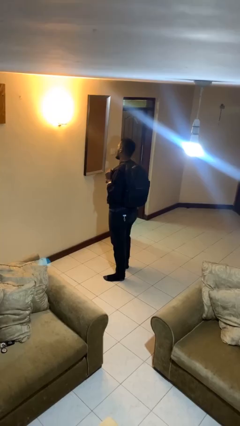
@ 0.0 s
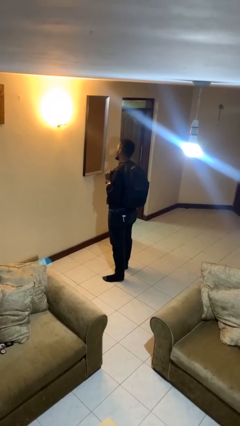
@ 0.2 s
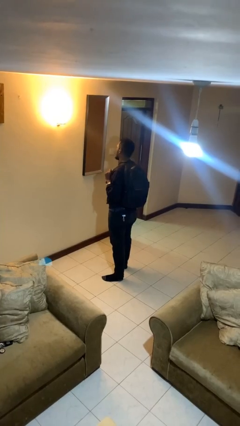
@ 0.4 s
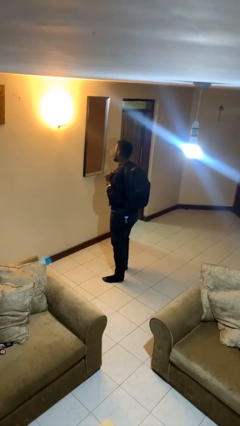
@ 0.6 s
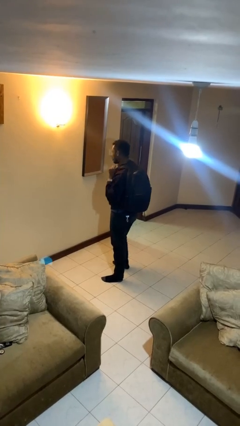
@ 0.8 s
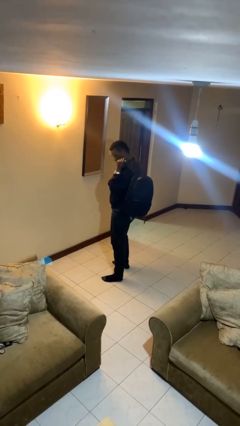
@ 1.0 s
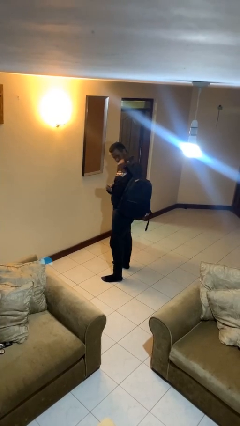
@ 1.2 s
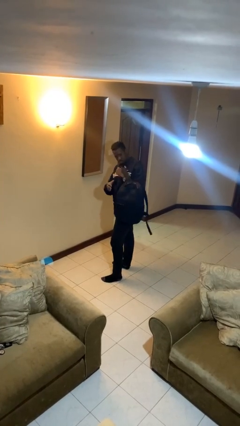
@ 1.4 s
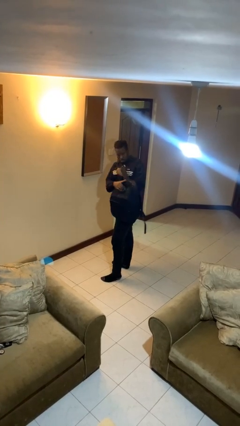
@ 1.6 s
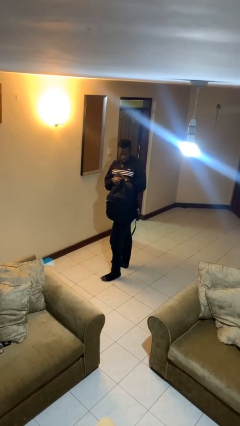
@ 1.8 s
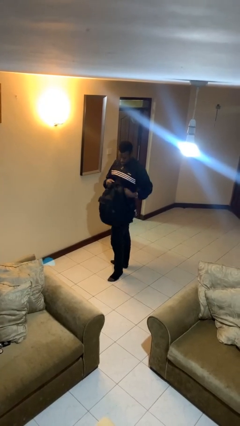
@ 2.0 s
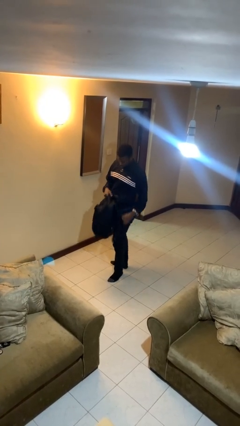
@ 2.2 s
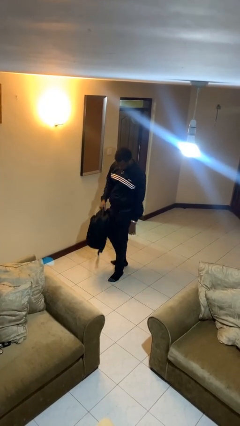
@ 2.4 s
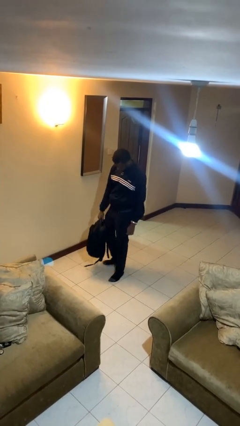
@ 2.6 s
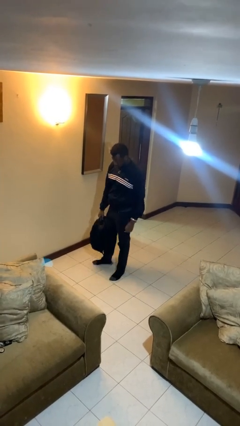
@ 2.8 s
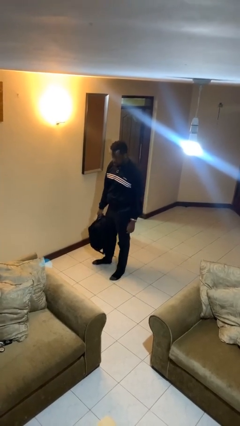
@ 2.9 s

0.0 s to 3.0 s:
person takes off backpack

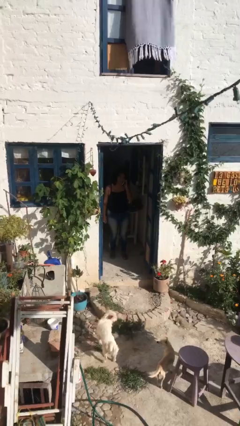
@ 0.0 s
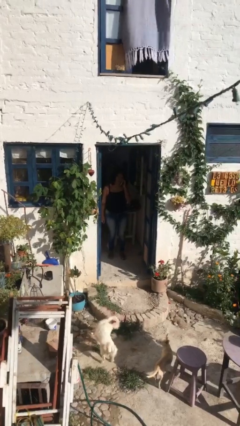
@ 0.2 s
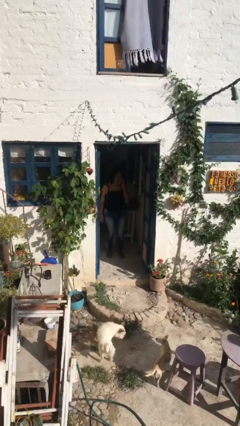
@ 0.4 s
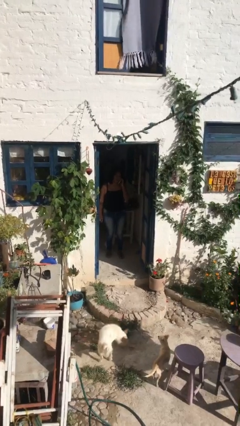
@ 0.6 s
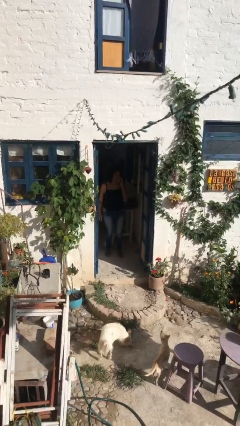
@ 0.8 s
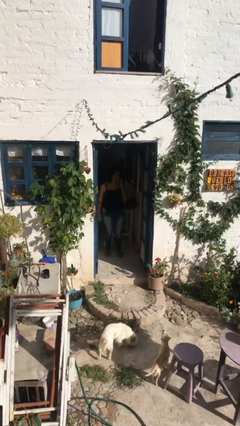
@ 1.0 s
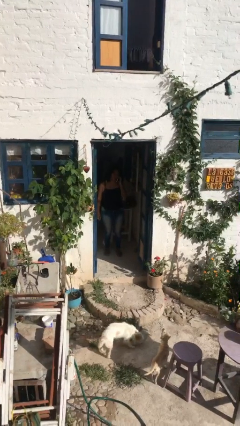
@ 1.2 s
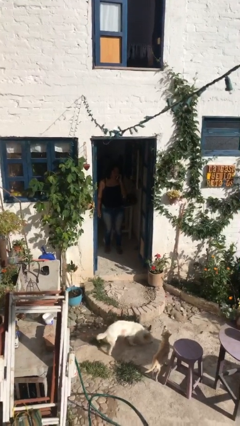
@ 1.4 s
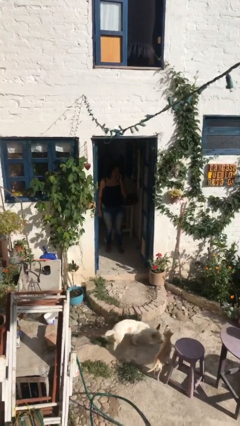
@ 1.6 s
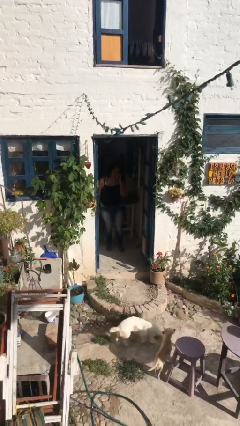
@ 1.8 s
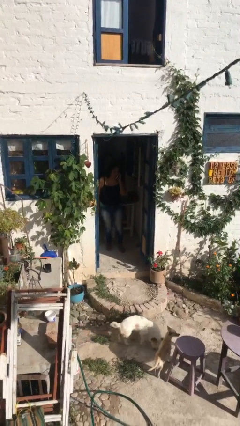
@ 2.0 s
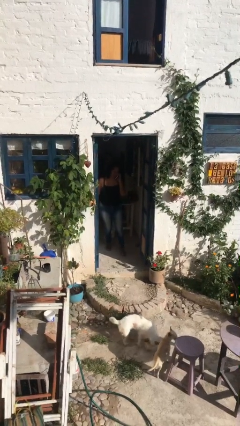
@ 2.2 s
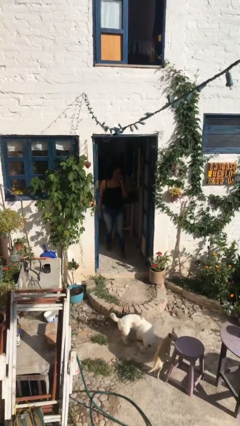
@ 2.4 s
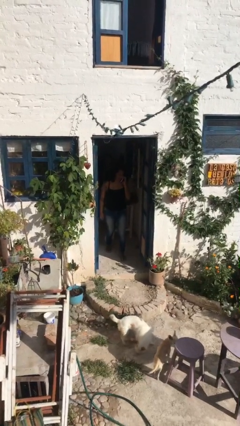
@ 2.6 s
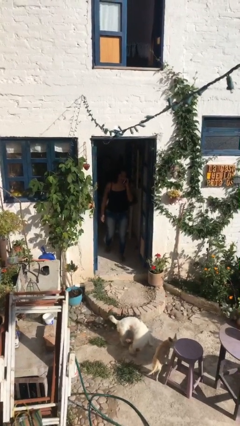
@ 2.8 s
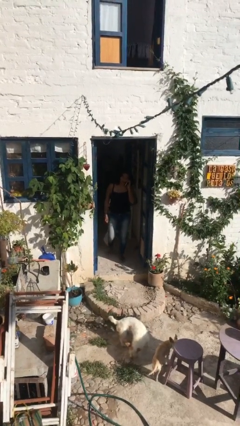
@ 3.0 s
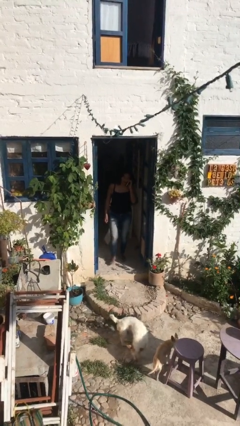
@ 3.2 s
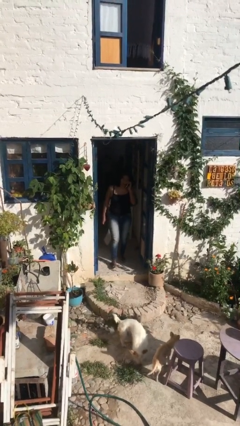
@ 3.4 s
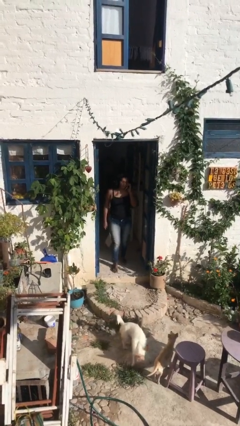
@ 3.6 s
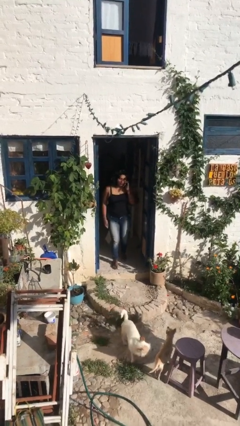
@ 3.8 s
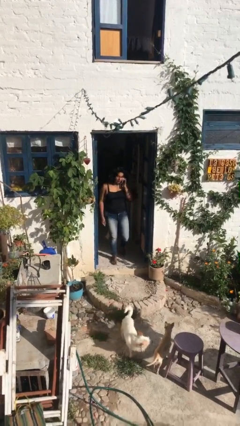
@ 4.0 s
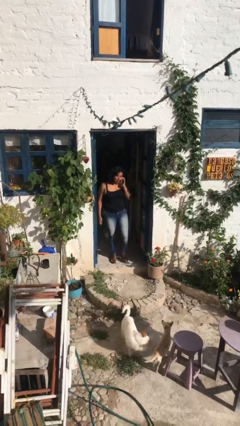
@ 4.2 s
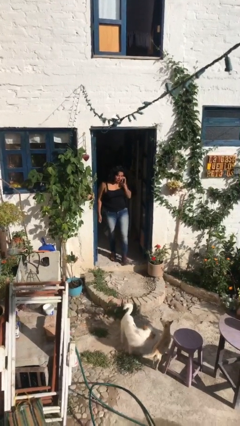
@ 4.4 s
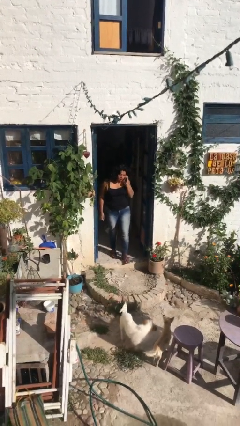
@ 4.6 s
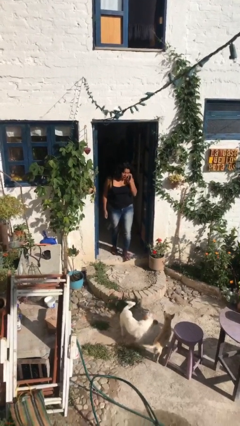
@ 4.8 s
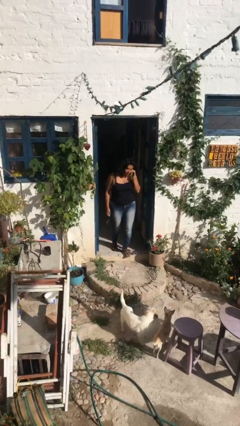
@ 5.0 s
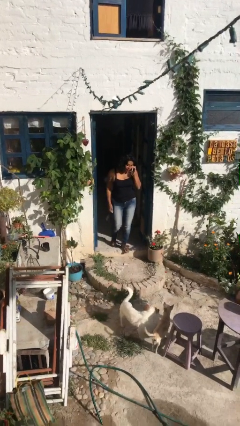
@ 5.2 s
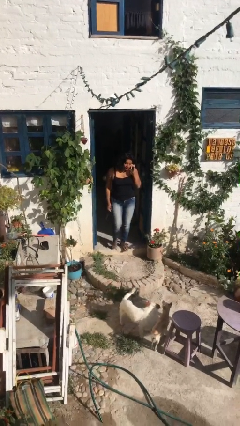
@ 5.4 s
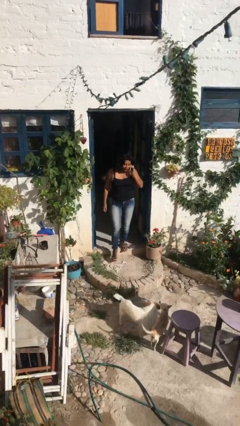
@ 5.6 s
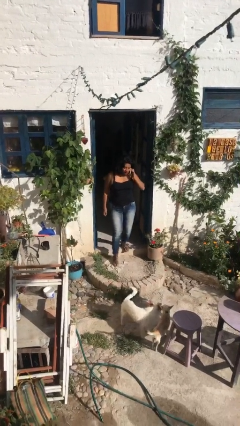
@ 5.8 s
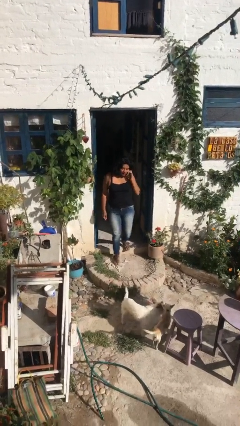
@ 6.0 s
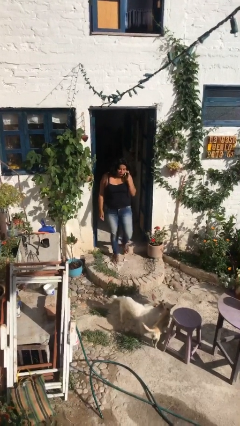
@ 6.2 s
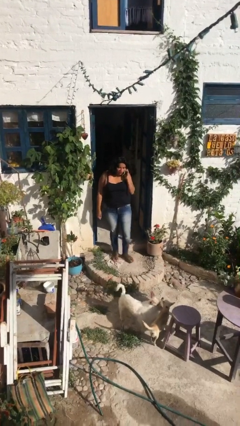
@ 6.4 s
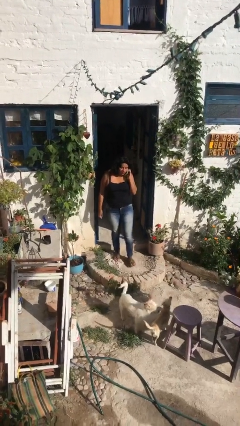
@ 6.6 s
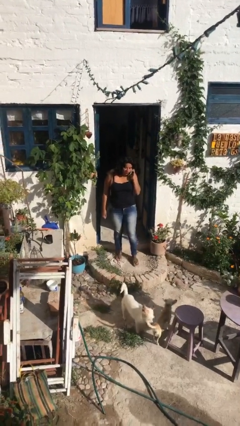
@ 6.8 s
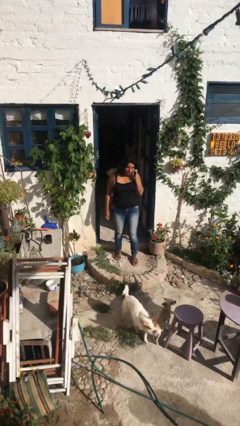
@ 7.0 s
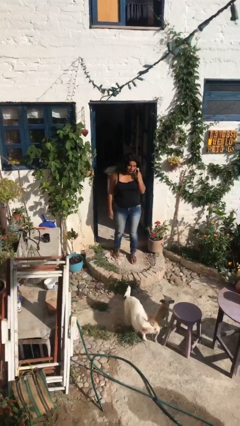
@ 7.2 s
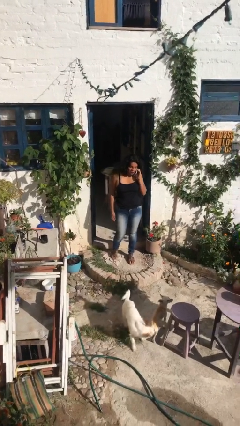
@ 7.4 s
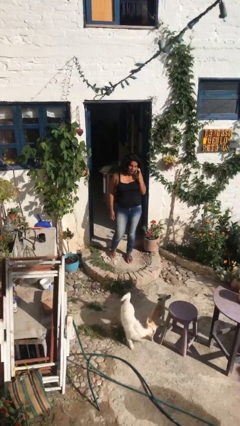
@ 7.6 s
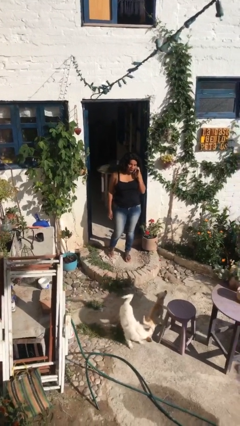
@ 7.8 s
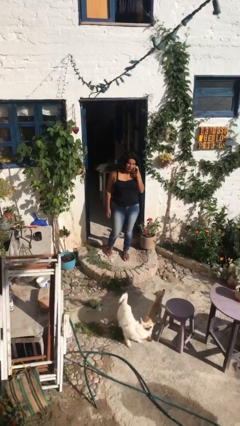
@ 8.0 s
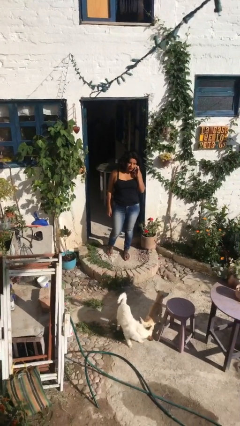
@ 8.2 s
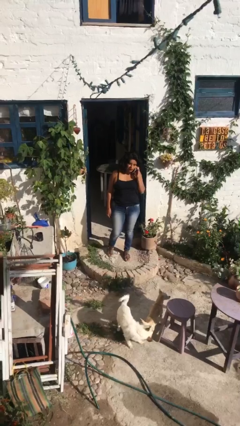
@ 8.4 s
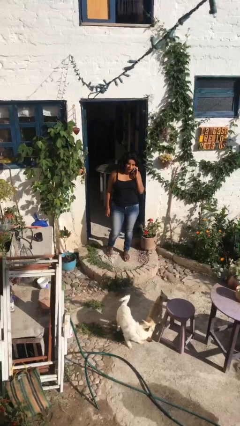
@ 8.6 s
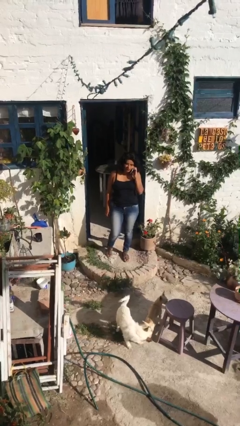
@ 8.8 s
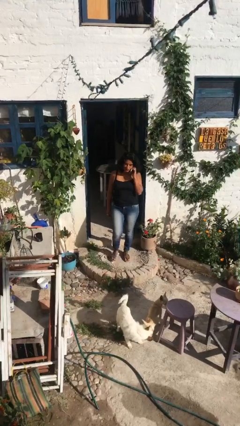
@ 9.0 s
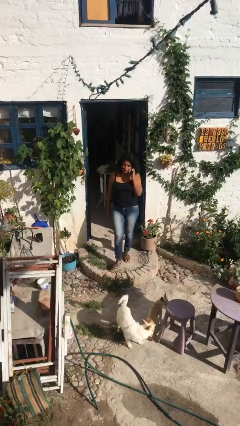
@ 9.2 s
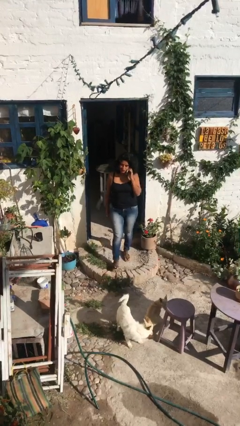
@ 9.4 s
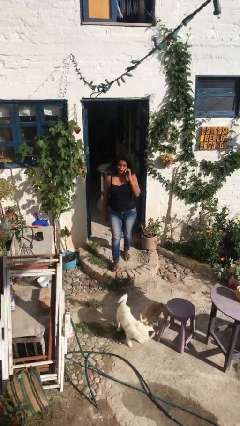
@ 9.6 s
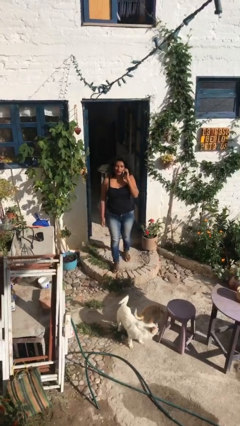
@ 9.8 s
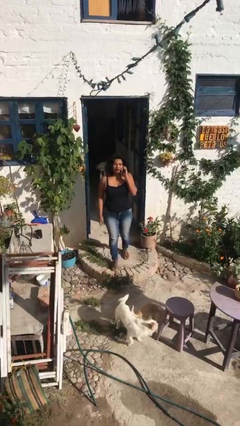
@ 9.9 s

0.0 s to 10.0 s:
person enters scene through structure

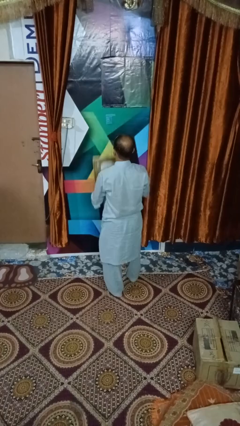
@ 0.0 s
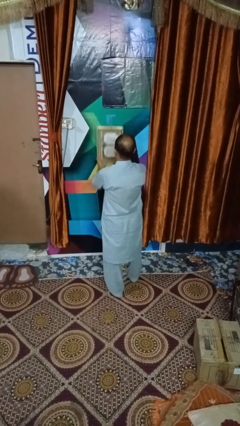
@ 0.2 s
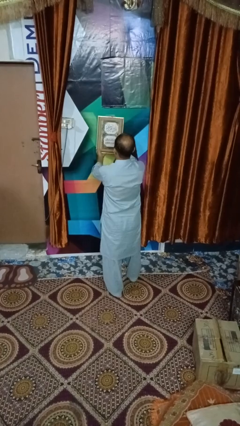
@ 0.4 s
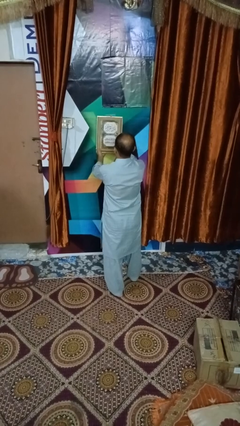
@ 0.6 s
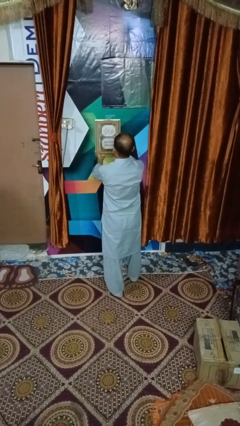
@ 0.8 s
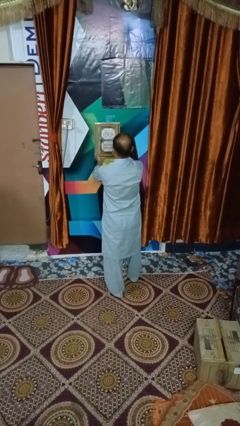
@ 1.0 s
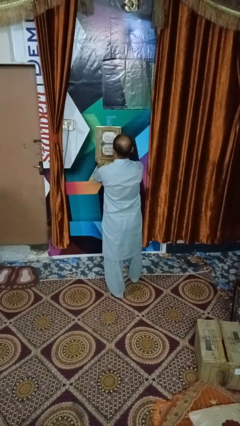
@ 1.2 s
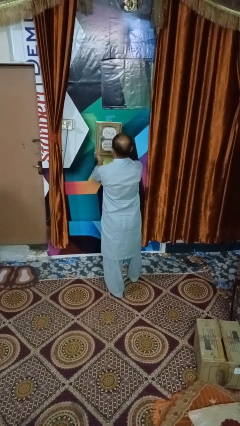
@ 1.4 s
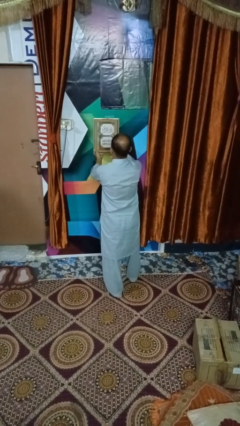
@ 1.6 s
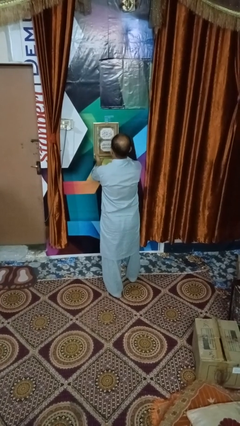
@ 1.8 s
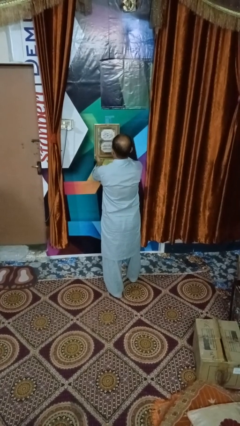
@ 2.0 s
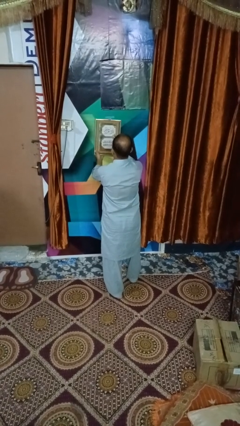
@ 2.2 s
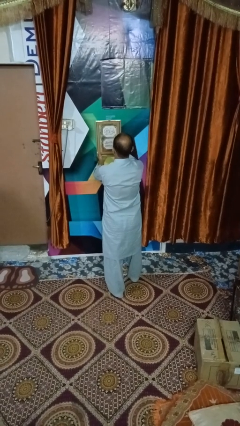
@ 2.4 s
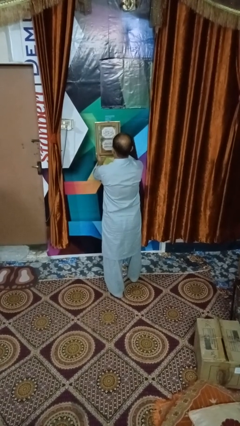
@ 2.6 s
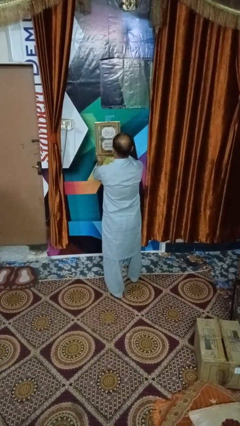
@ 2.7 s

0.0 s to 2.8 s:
person puts up picture frame

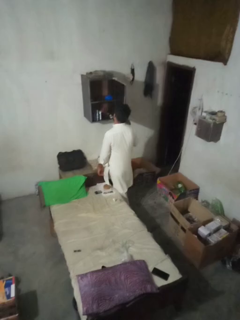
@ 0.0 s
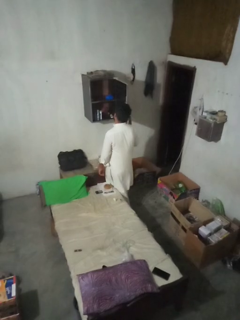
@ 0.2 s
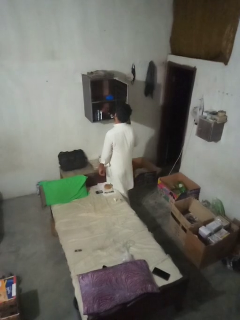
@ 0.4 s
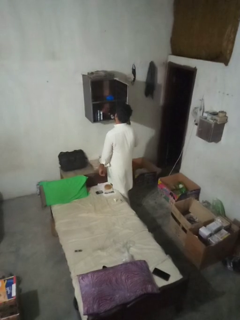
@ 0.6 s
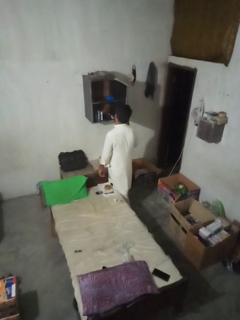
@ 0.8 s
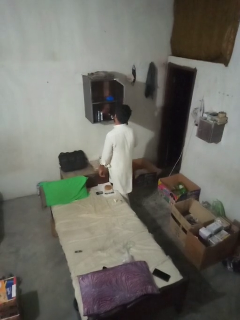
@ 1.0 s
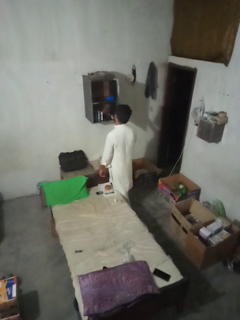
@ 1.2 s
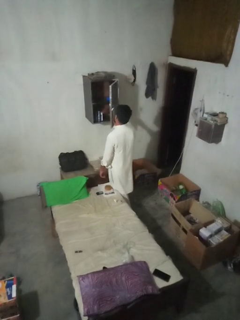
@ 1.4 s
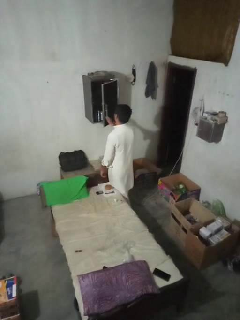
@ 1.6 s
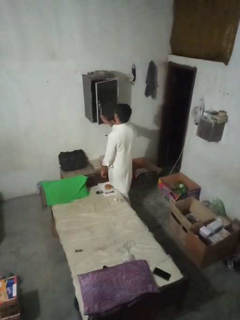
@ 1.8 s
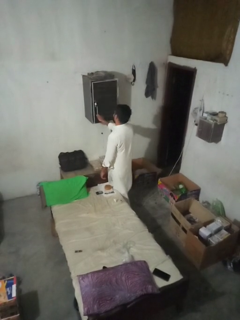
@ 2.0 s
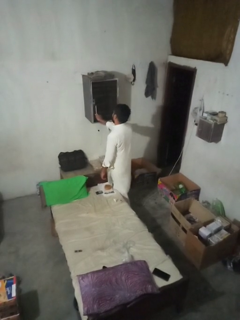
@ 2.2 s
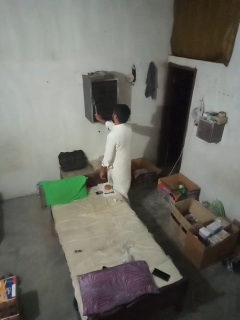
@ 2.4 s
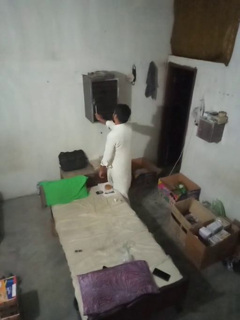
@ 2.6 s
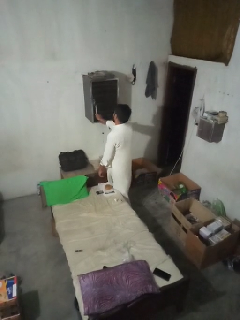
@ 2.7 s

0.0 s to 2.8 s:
person closes dresser drawer
